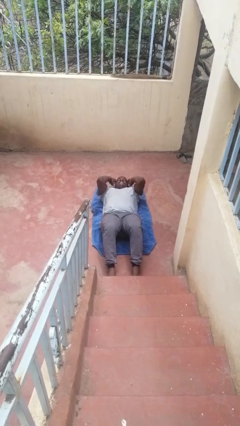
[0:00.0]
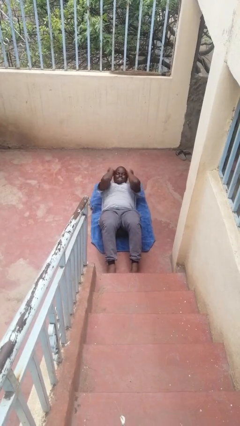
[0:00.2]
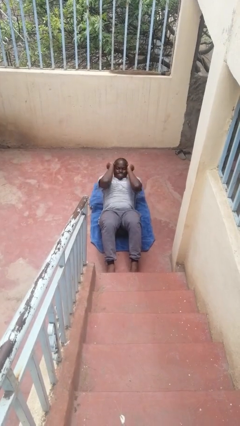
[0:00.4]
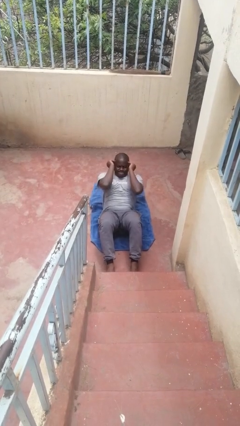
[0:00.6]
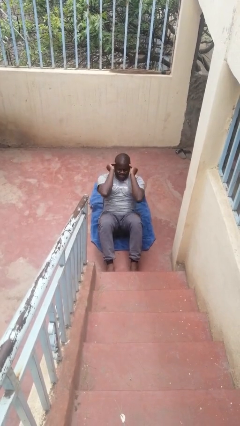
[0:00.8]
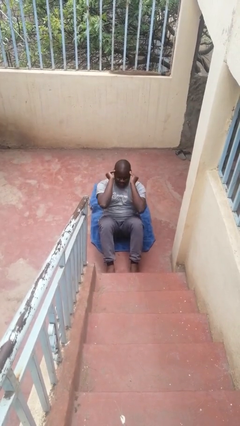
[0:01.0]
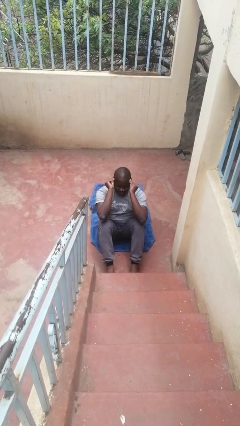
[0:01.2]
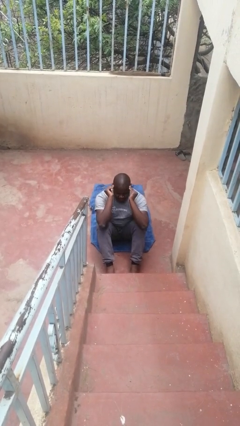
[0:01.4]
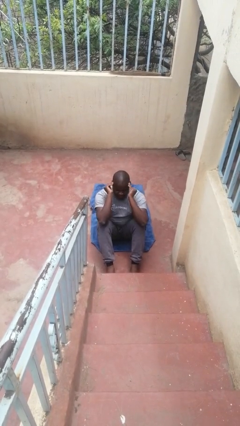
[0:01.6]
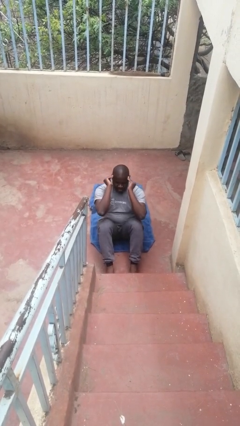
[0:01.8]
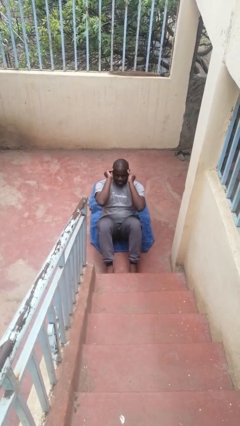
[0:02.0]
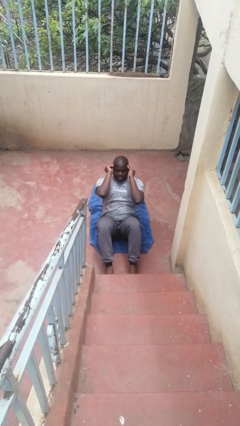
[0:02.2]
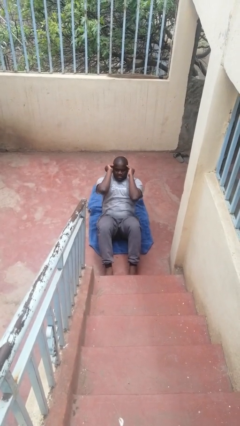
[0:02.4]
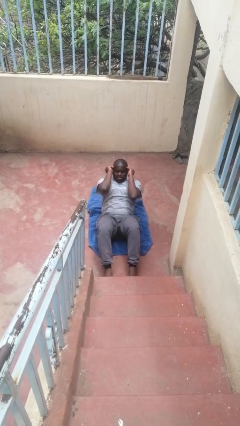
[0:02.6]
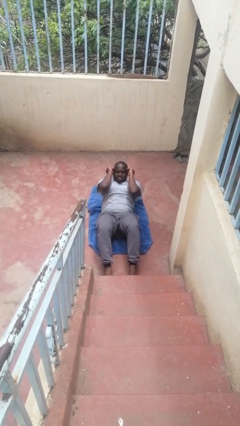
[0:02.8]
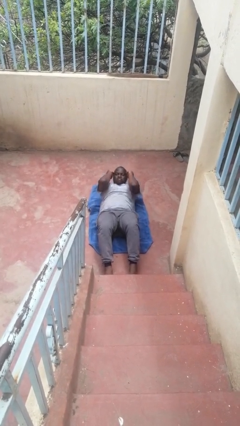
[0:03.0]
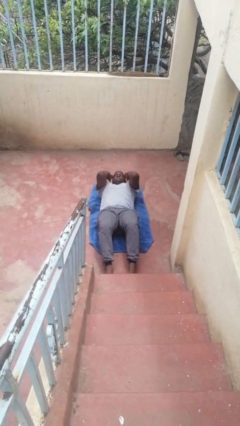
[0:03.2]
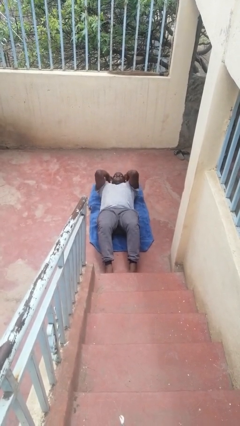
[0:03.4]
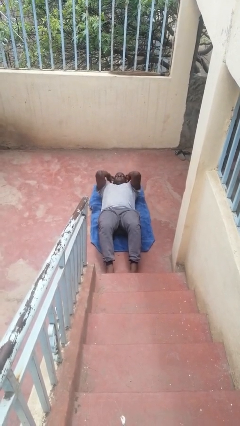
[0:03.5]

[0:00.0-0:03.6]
person exercises with situp

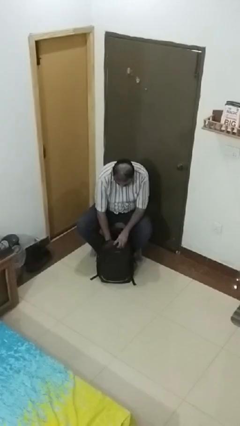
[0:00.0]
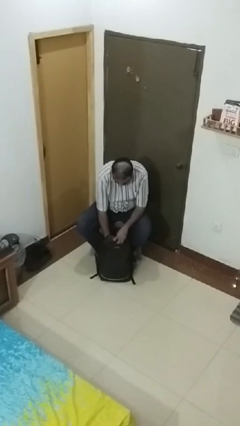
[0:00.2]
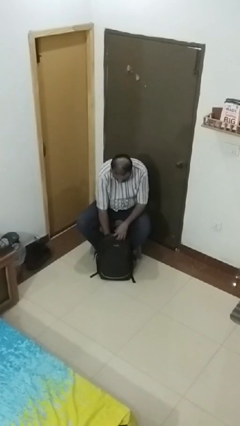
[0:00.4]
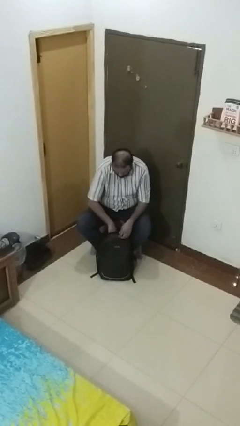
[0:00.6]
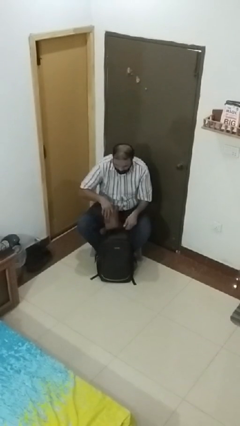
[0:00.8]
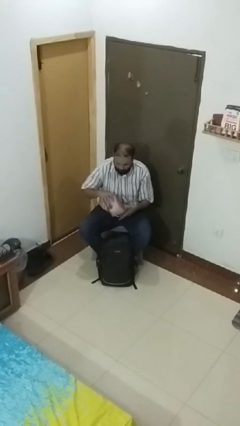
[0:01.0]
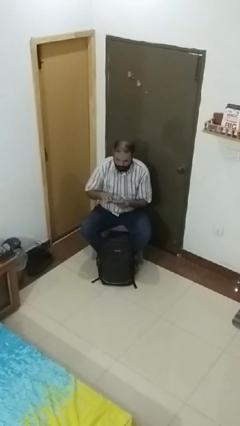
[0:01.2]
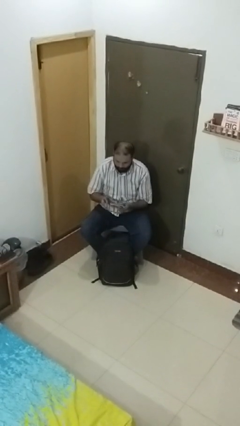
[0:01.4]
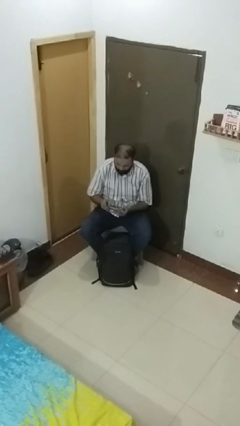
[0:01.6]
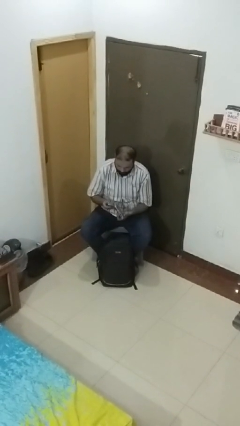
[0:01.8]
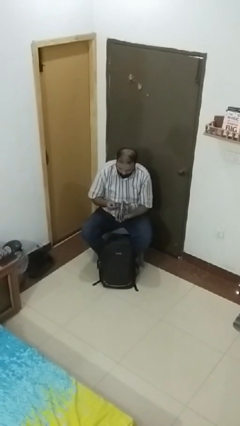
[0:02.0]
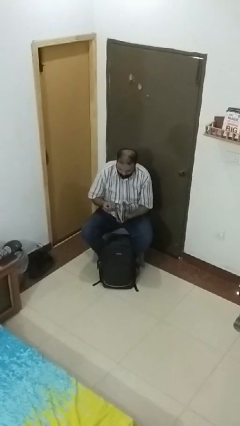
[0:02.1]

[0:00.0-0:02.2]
person takes object from backpack

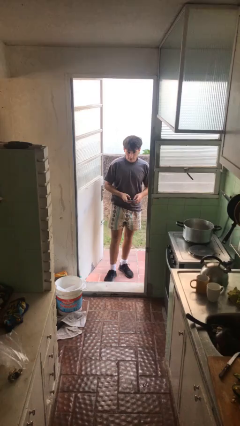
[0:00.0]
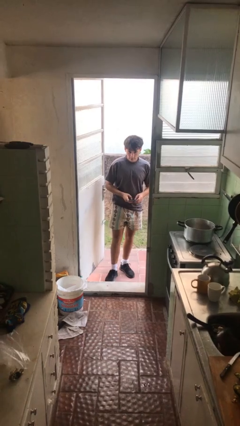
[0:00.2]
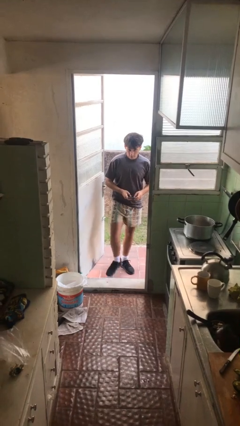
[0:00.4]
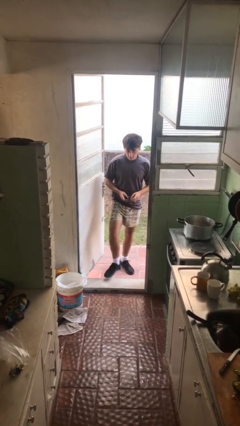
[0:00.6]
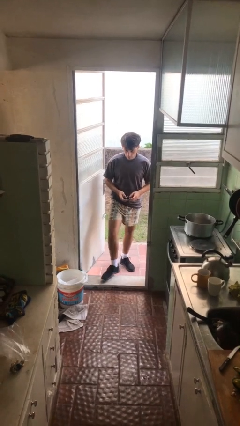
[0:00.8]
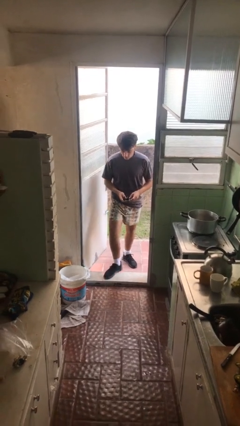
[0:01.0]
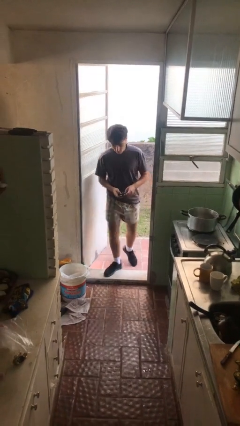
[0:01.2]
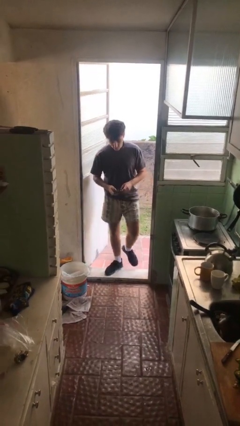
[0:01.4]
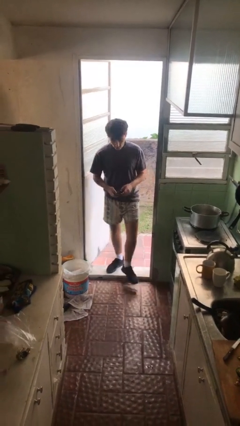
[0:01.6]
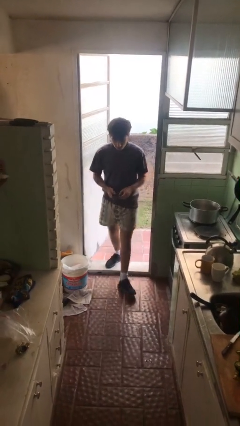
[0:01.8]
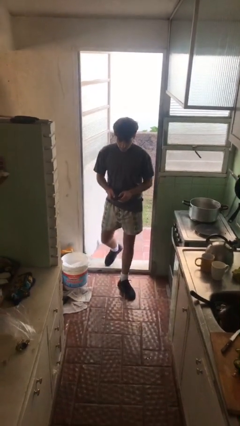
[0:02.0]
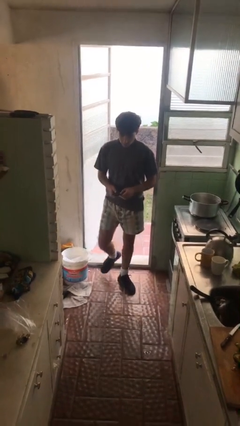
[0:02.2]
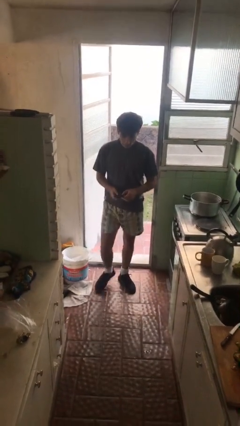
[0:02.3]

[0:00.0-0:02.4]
person enters scene through structure

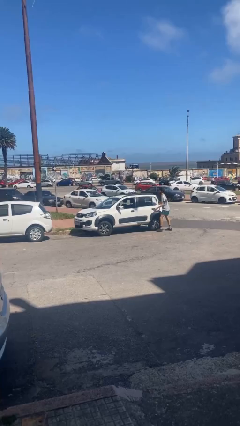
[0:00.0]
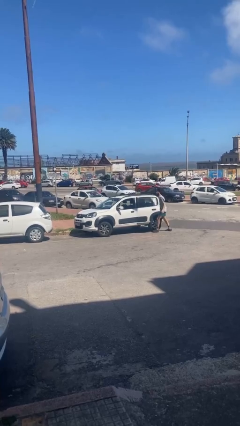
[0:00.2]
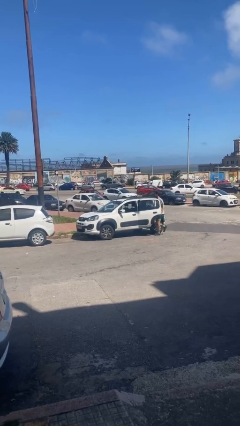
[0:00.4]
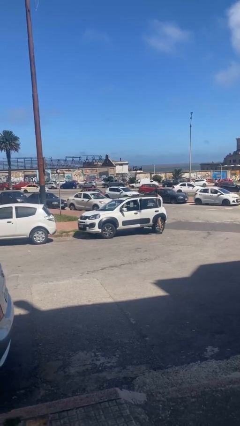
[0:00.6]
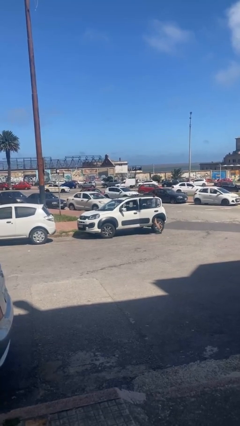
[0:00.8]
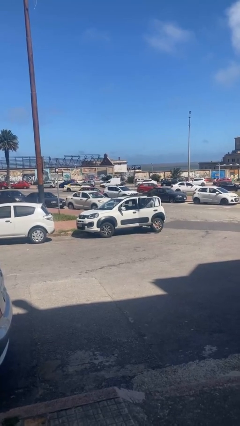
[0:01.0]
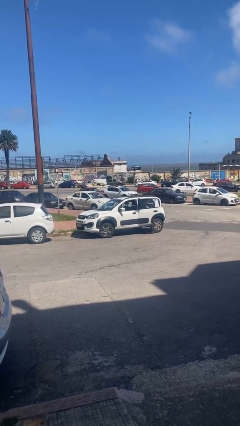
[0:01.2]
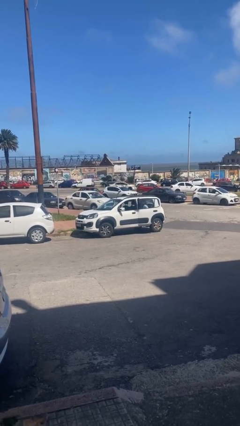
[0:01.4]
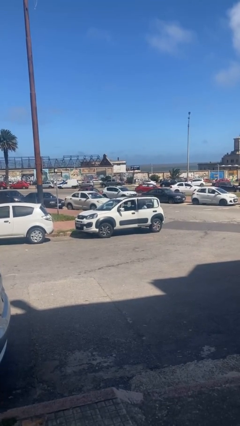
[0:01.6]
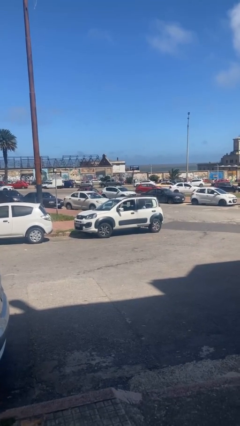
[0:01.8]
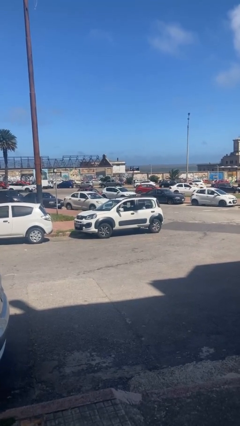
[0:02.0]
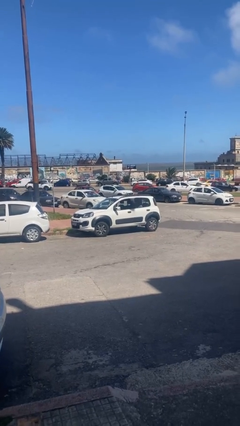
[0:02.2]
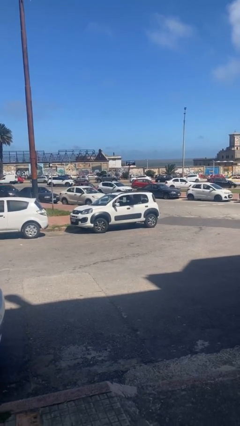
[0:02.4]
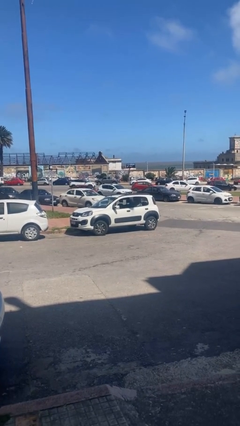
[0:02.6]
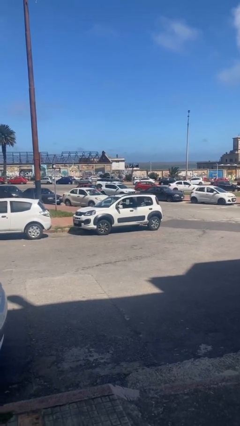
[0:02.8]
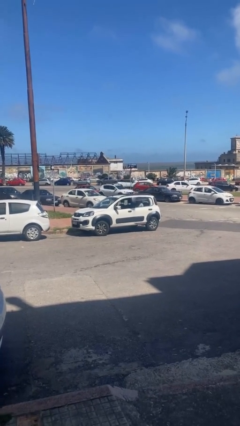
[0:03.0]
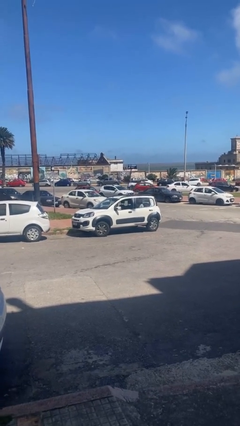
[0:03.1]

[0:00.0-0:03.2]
car picks up person

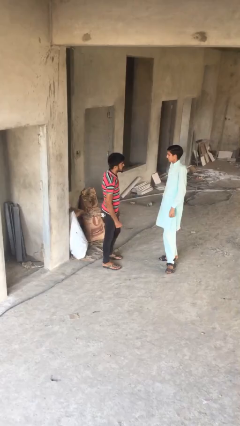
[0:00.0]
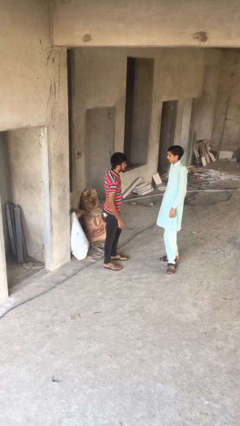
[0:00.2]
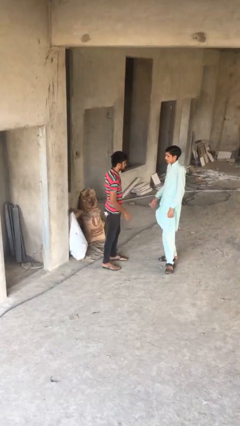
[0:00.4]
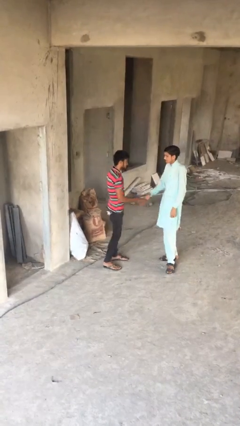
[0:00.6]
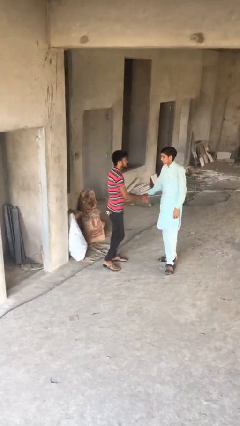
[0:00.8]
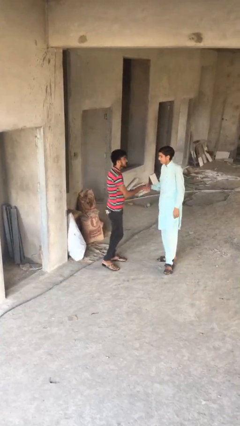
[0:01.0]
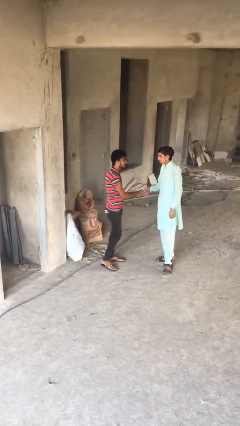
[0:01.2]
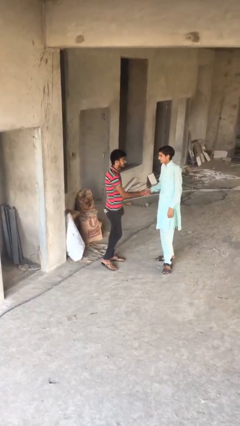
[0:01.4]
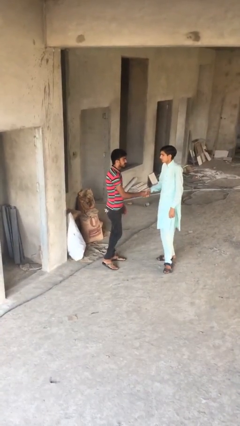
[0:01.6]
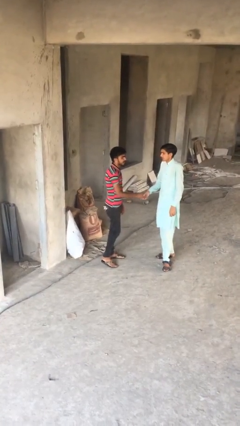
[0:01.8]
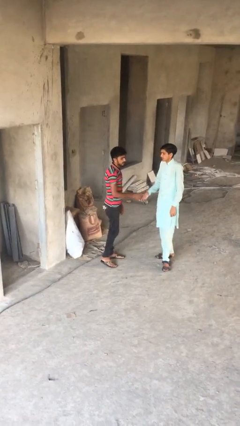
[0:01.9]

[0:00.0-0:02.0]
person shakes hand

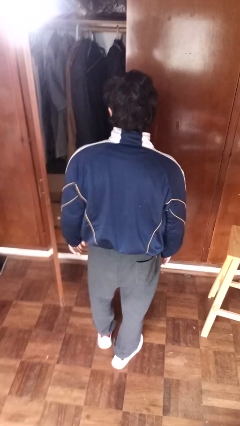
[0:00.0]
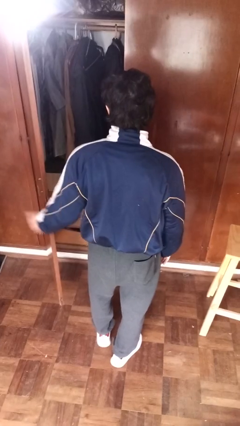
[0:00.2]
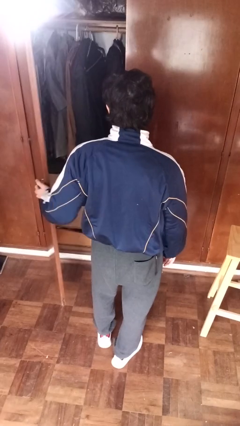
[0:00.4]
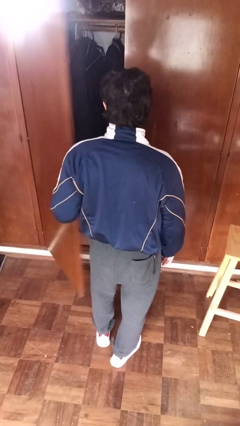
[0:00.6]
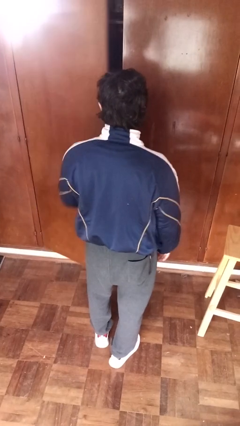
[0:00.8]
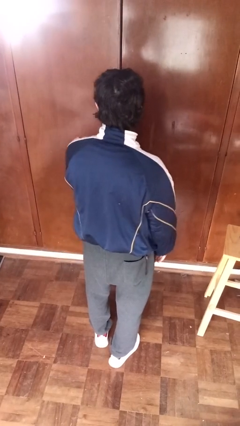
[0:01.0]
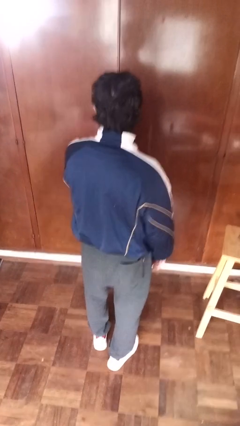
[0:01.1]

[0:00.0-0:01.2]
person closes closet door

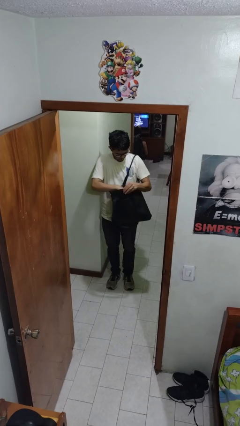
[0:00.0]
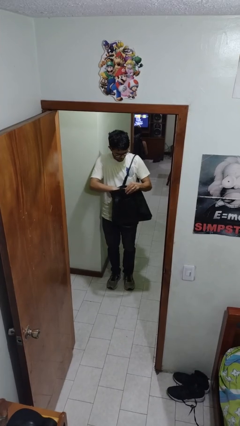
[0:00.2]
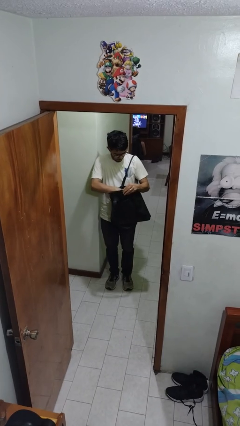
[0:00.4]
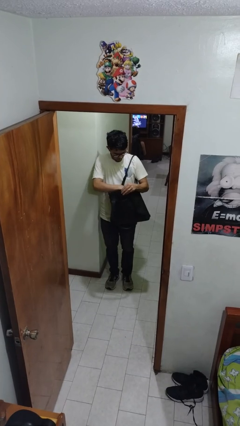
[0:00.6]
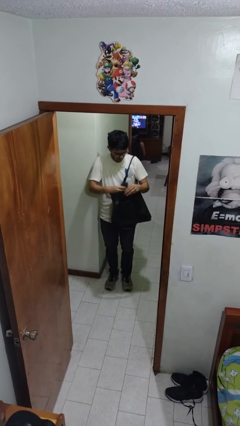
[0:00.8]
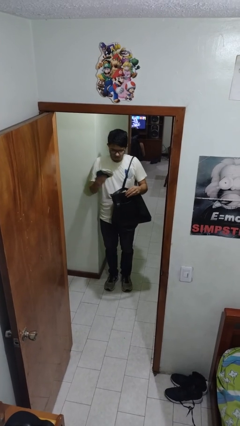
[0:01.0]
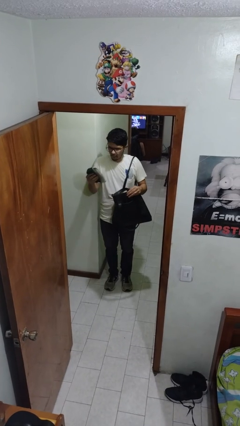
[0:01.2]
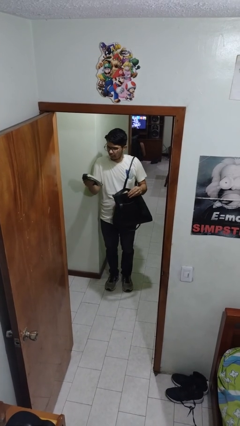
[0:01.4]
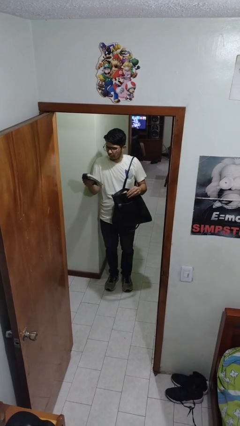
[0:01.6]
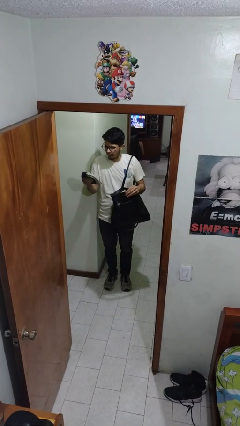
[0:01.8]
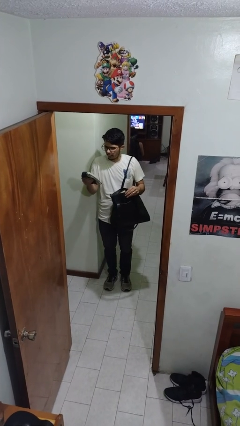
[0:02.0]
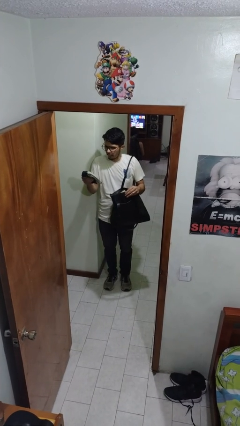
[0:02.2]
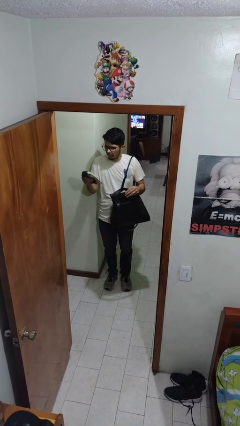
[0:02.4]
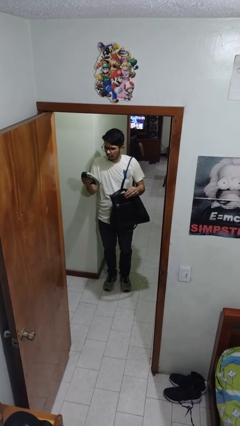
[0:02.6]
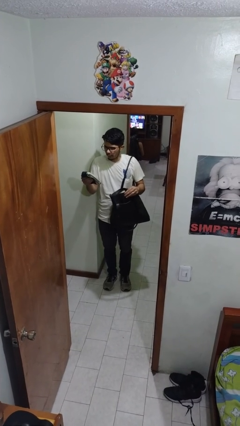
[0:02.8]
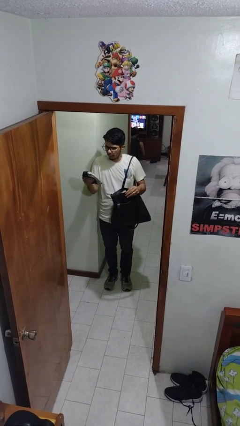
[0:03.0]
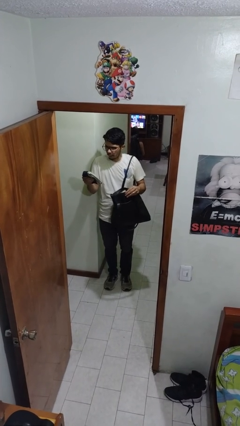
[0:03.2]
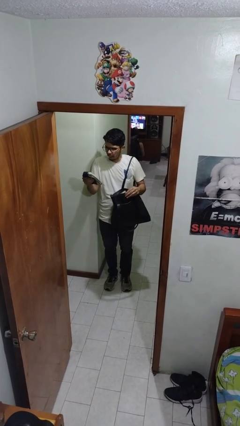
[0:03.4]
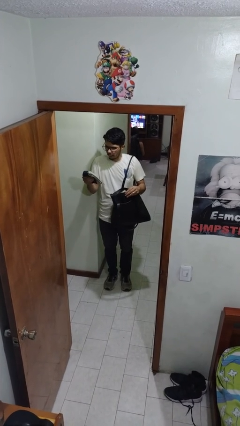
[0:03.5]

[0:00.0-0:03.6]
person takes object from purse
